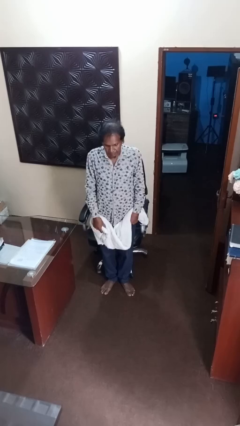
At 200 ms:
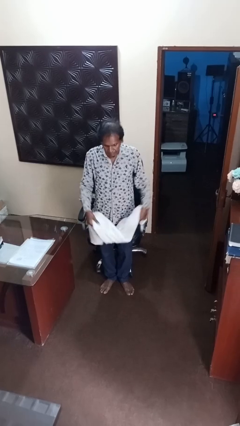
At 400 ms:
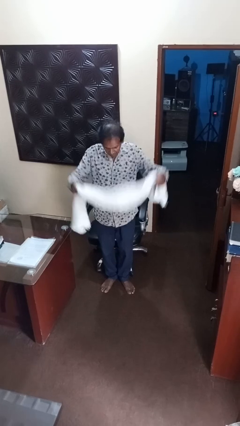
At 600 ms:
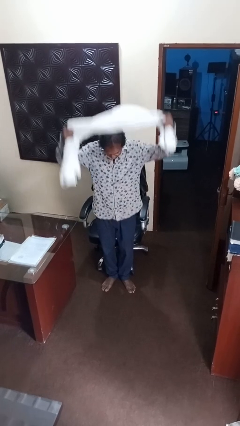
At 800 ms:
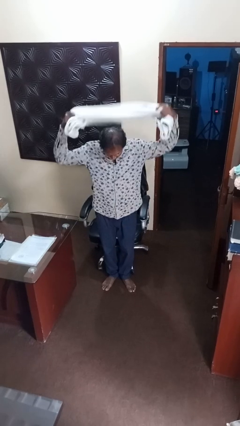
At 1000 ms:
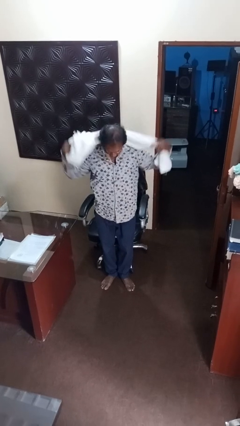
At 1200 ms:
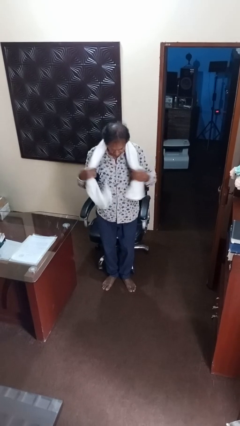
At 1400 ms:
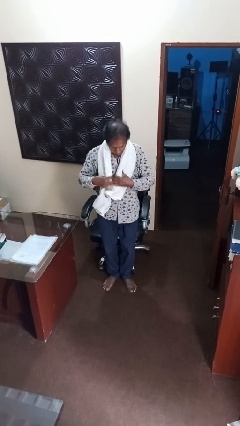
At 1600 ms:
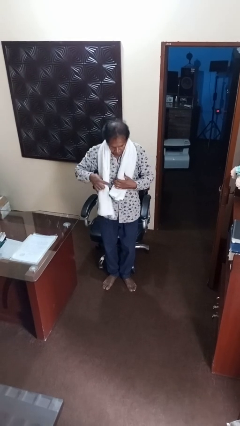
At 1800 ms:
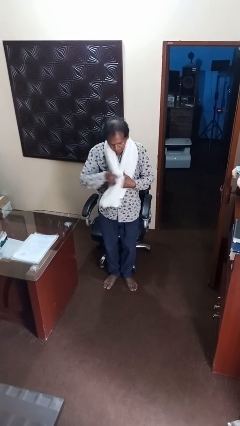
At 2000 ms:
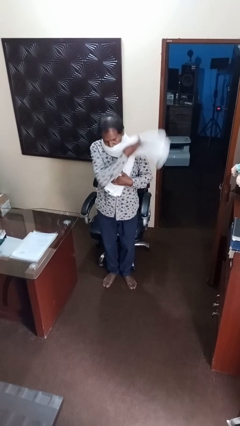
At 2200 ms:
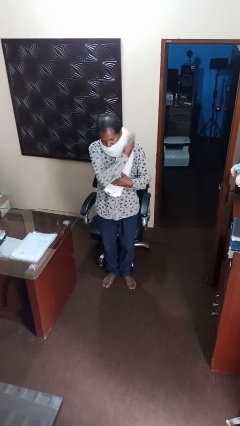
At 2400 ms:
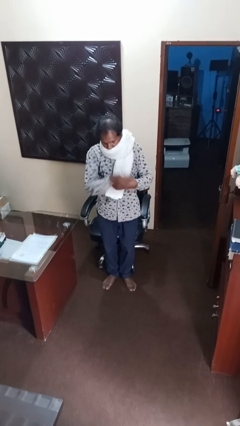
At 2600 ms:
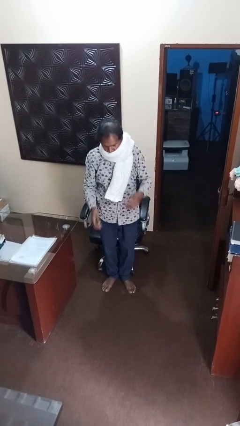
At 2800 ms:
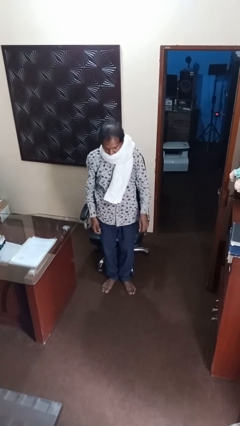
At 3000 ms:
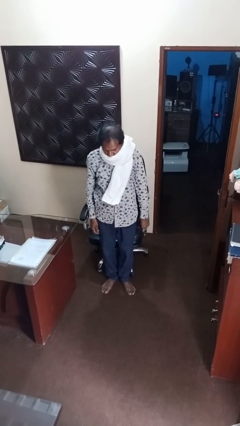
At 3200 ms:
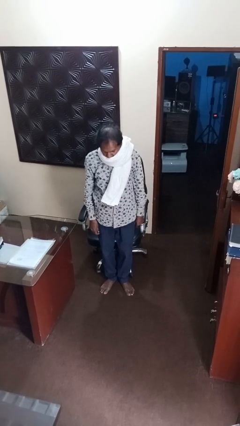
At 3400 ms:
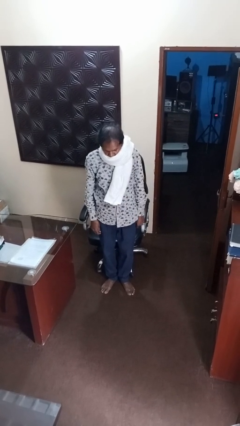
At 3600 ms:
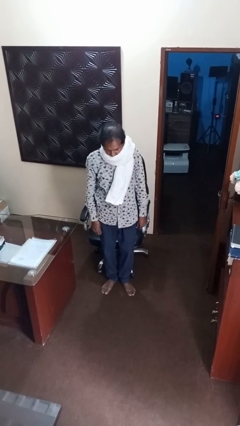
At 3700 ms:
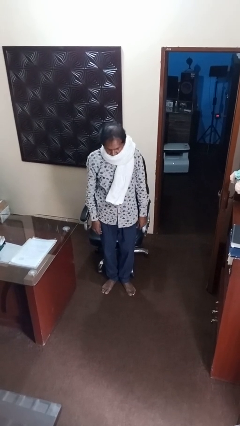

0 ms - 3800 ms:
person puts on scarf

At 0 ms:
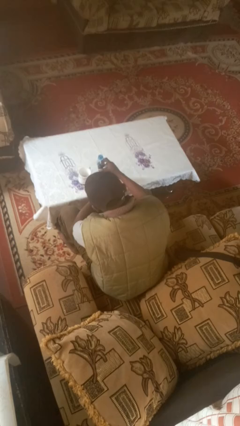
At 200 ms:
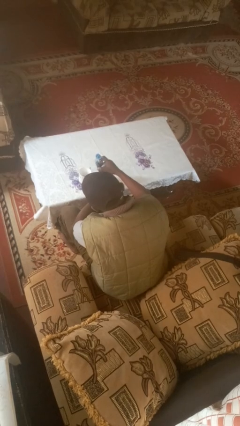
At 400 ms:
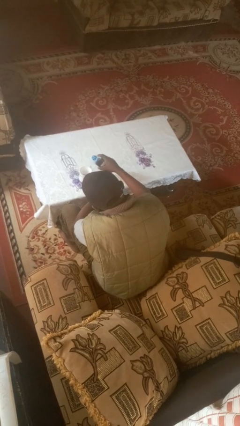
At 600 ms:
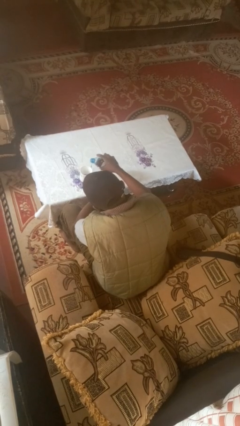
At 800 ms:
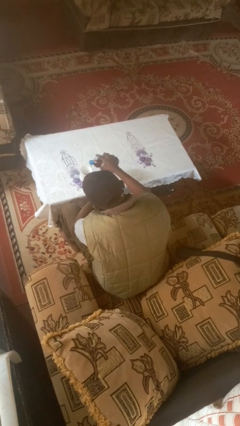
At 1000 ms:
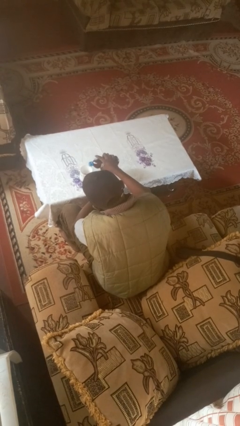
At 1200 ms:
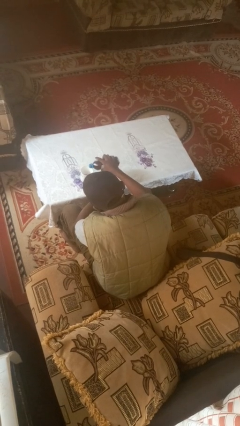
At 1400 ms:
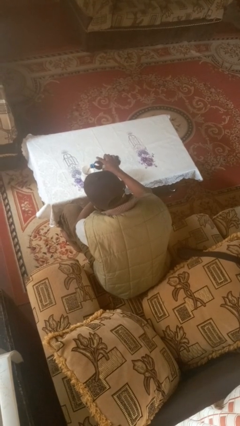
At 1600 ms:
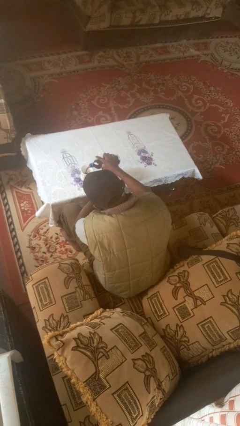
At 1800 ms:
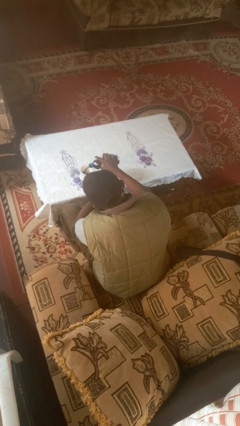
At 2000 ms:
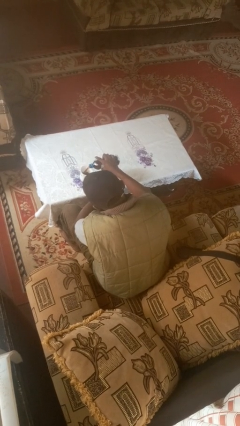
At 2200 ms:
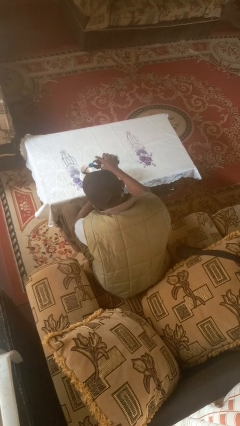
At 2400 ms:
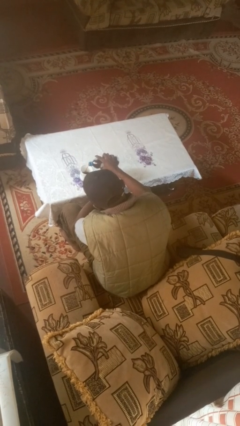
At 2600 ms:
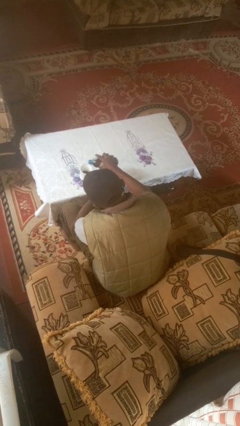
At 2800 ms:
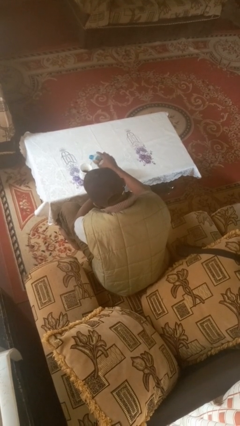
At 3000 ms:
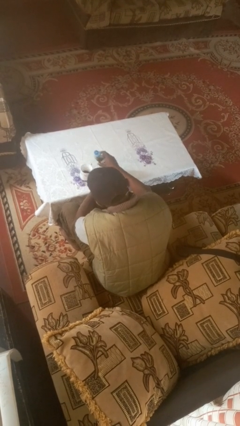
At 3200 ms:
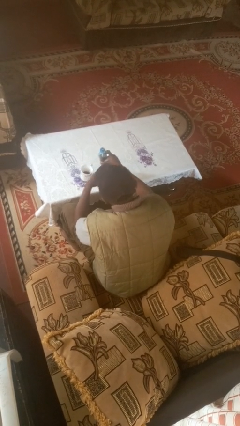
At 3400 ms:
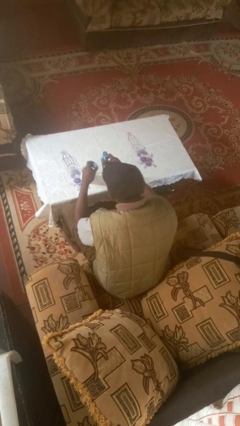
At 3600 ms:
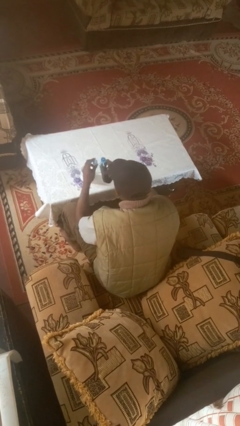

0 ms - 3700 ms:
person pours liquid into cup

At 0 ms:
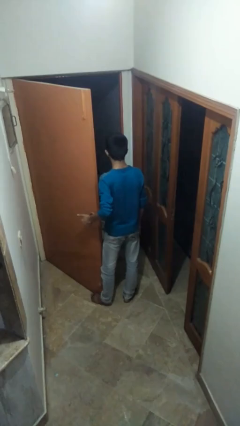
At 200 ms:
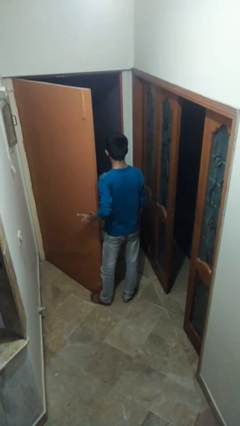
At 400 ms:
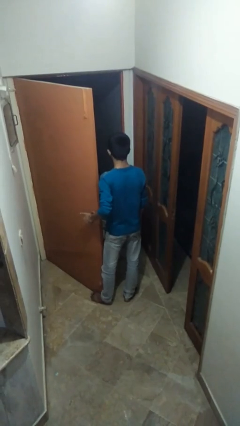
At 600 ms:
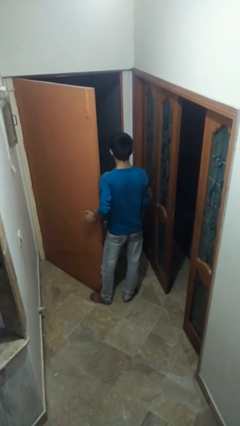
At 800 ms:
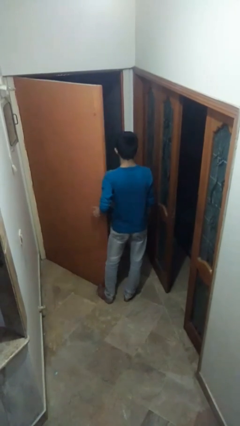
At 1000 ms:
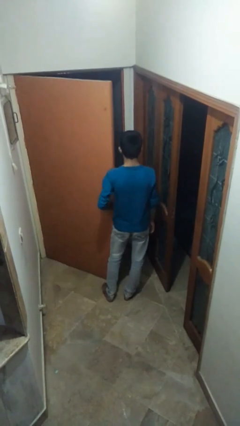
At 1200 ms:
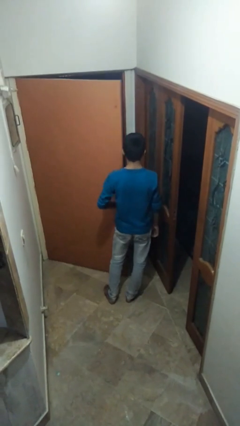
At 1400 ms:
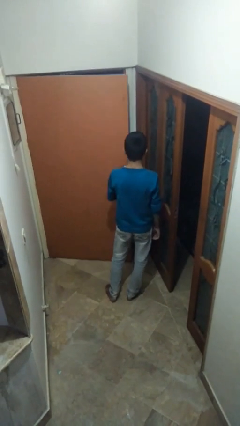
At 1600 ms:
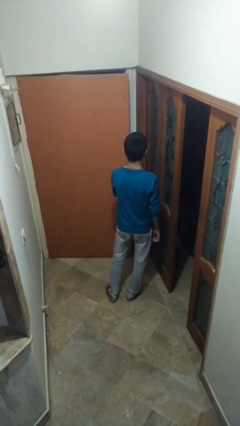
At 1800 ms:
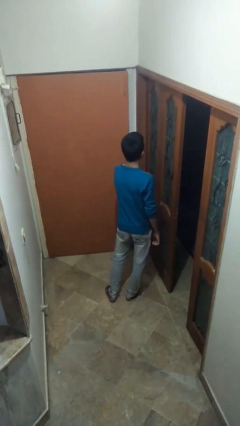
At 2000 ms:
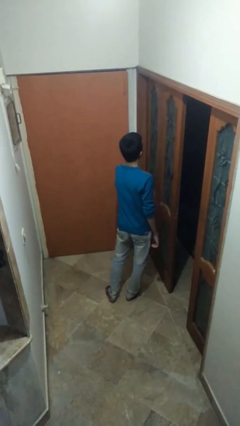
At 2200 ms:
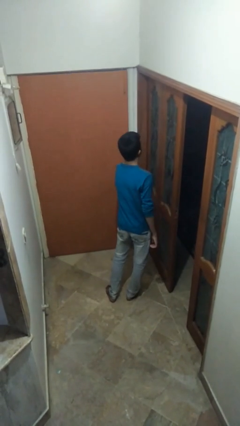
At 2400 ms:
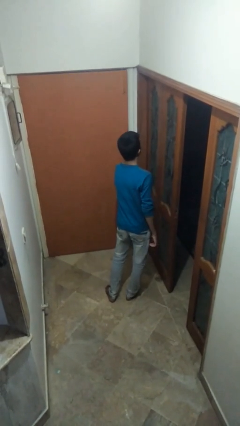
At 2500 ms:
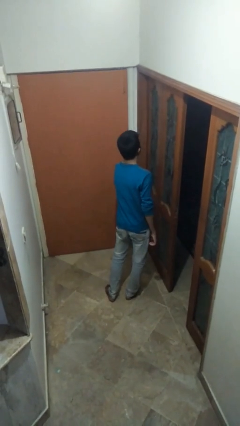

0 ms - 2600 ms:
person closes facility door

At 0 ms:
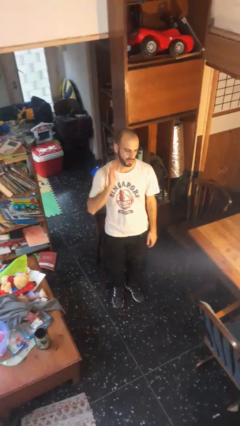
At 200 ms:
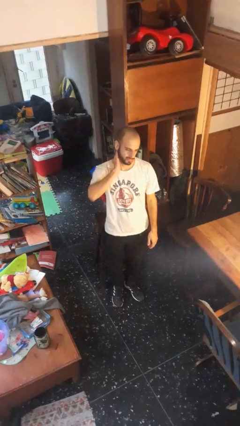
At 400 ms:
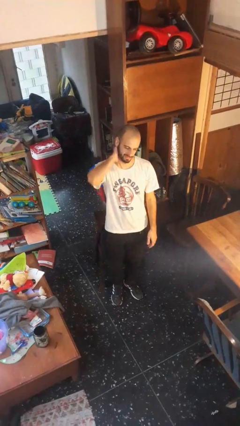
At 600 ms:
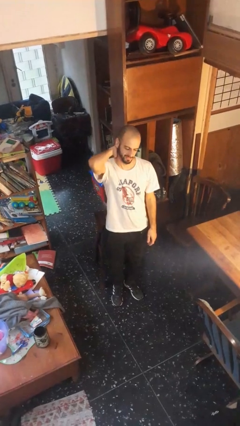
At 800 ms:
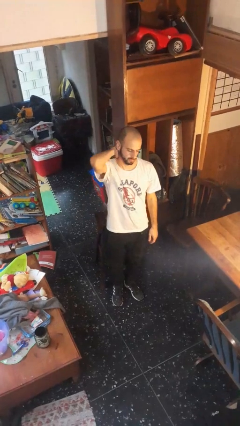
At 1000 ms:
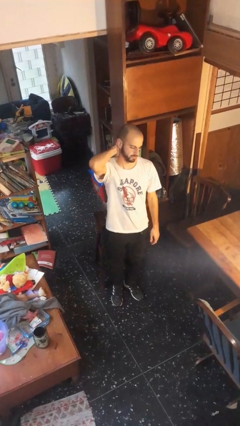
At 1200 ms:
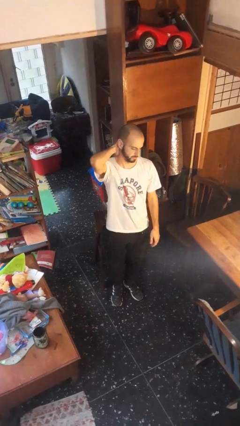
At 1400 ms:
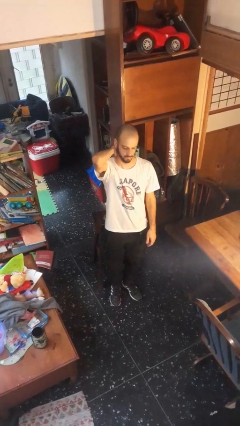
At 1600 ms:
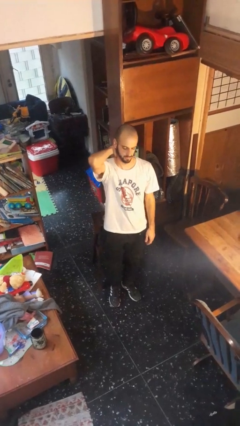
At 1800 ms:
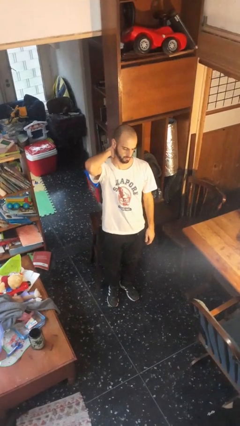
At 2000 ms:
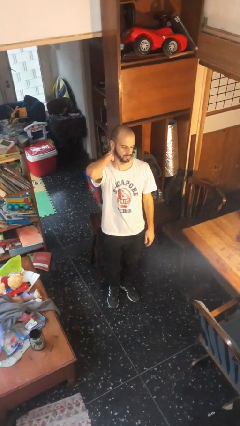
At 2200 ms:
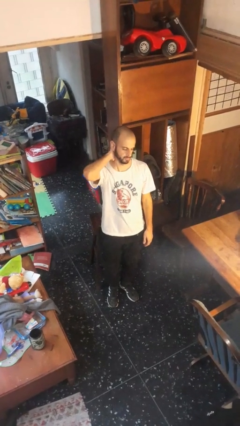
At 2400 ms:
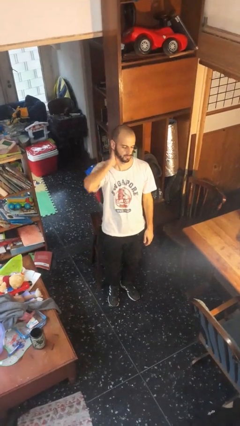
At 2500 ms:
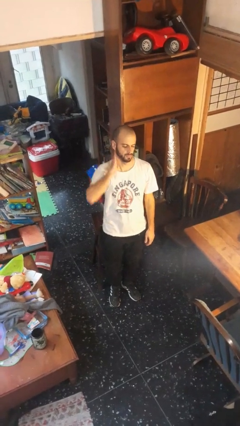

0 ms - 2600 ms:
person rubs neck

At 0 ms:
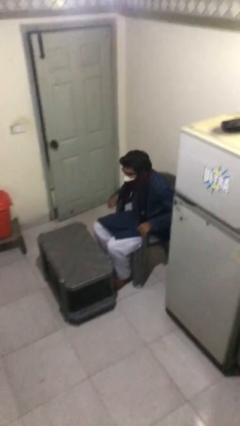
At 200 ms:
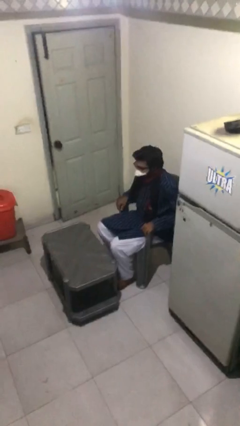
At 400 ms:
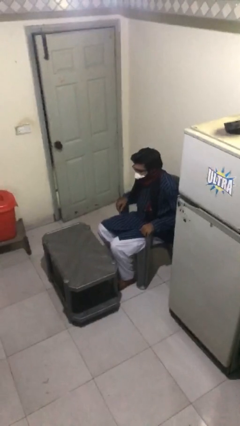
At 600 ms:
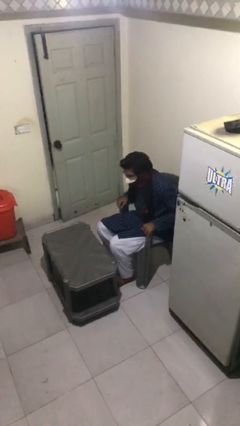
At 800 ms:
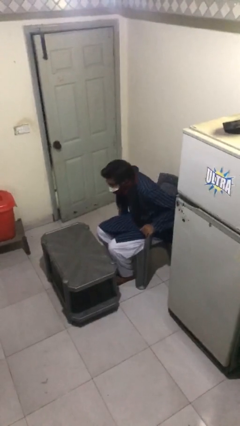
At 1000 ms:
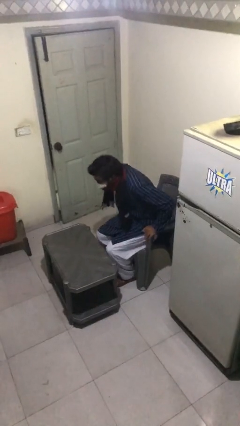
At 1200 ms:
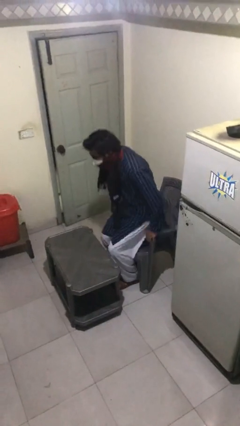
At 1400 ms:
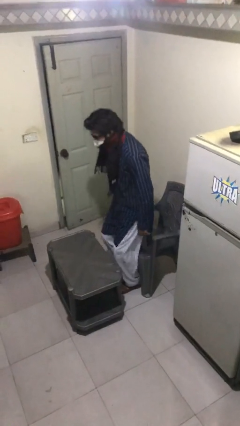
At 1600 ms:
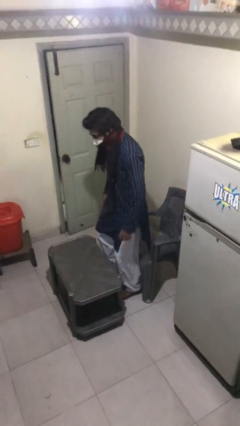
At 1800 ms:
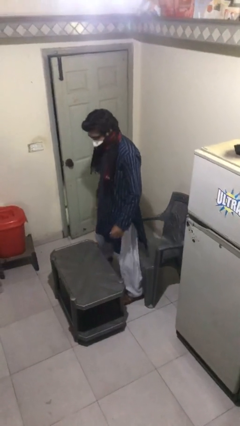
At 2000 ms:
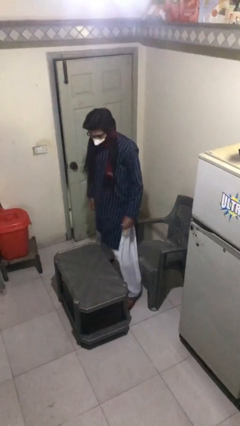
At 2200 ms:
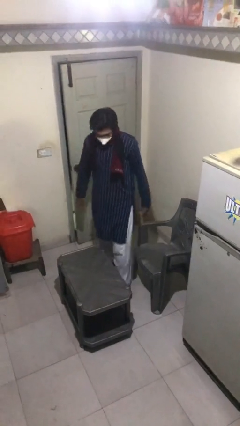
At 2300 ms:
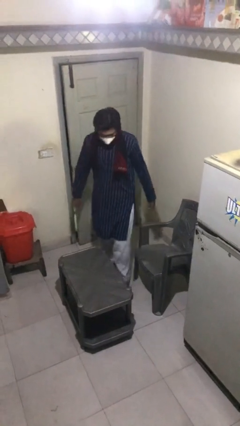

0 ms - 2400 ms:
person stands up

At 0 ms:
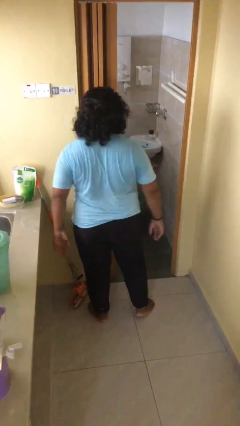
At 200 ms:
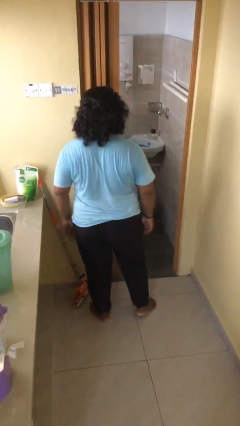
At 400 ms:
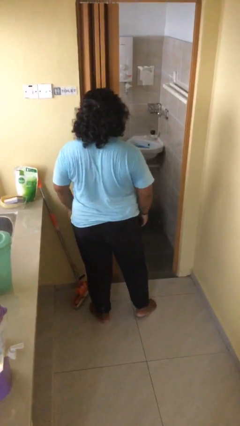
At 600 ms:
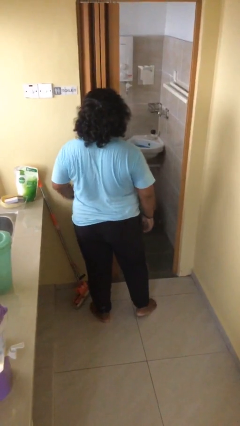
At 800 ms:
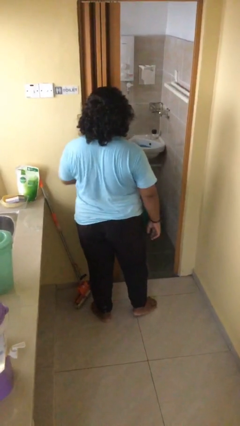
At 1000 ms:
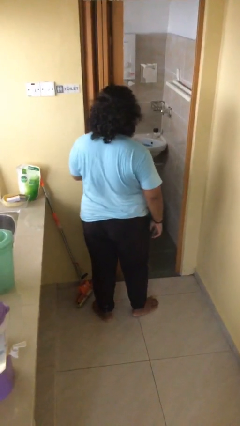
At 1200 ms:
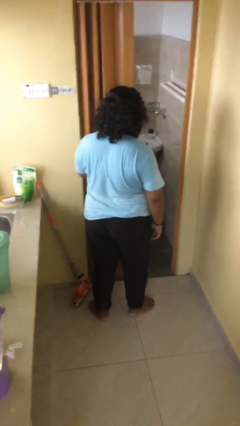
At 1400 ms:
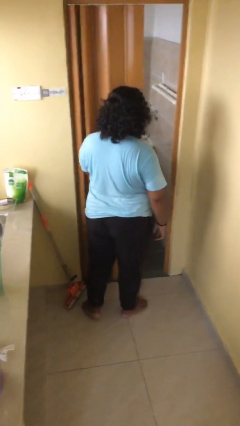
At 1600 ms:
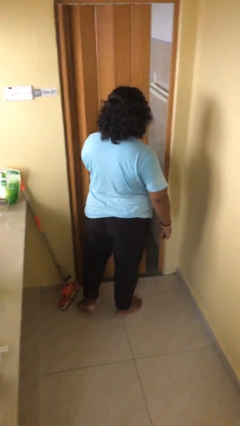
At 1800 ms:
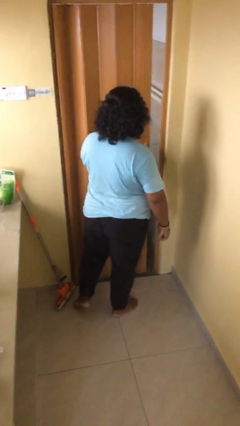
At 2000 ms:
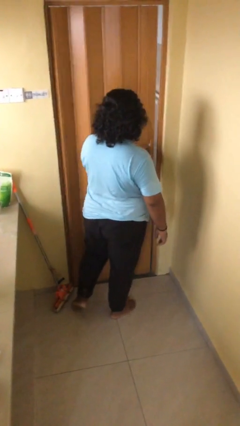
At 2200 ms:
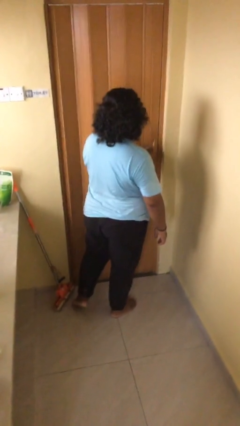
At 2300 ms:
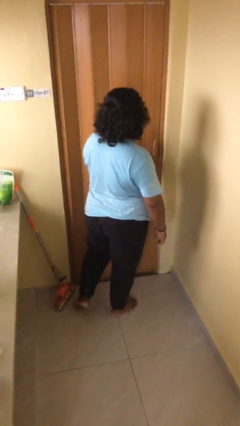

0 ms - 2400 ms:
person closes sliding door
